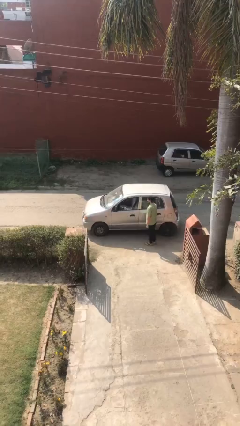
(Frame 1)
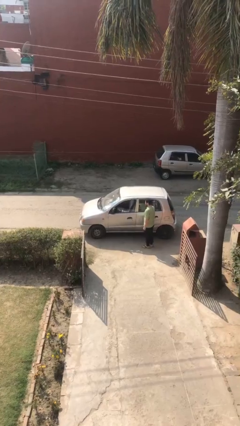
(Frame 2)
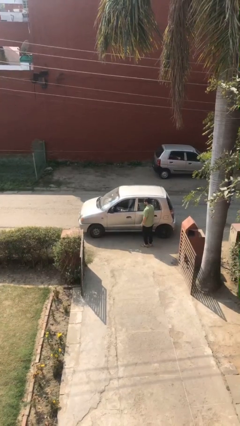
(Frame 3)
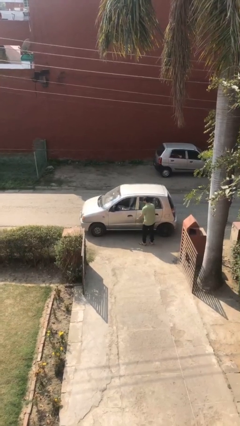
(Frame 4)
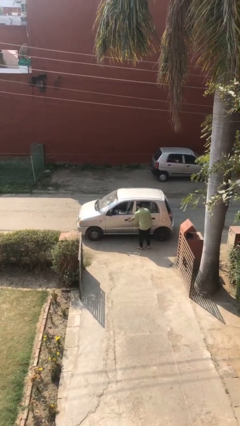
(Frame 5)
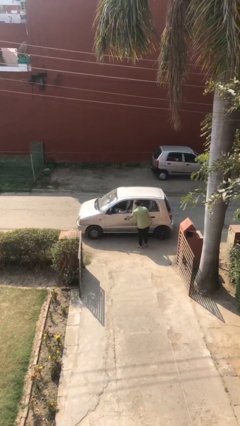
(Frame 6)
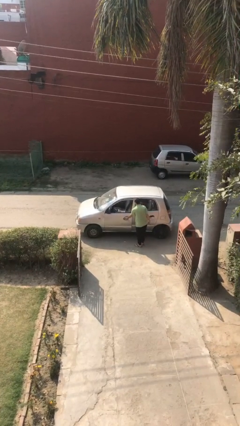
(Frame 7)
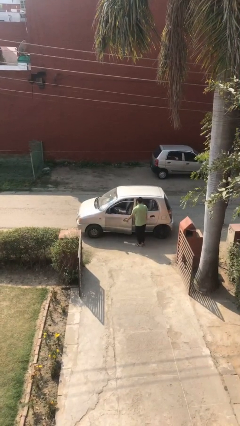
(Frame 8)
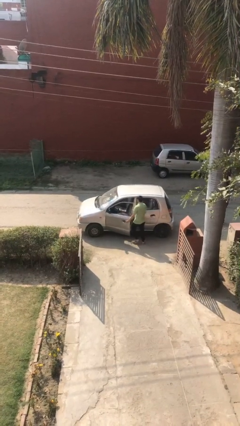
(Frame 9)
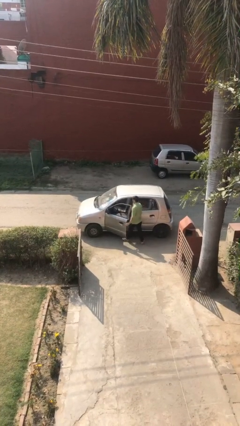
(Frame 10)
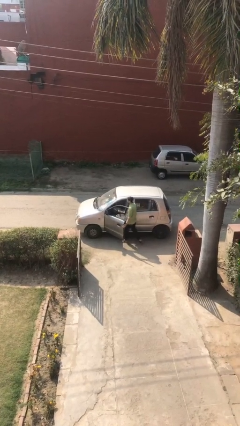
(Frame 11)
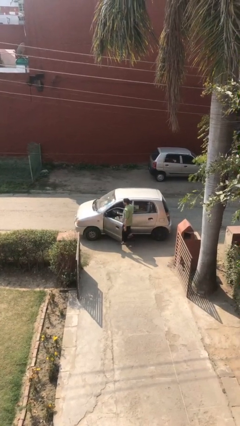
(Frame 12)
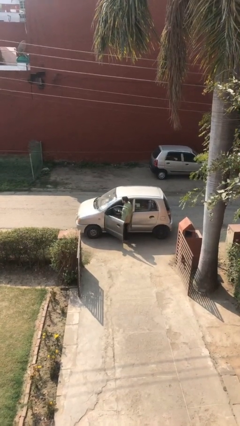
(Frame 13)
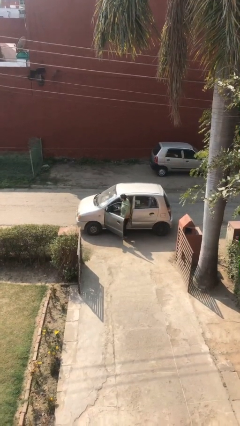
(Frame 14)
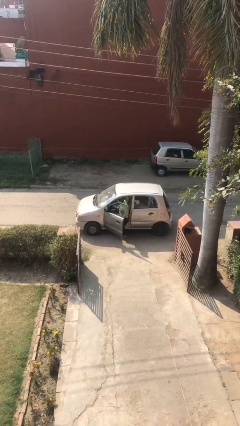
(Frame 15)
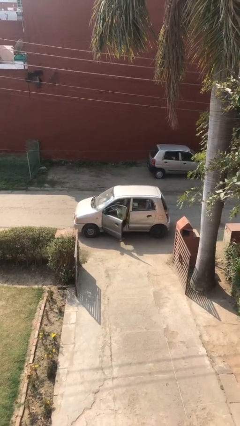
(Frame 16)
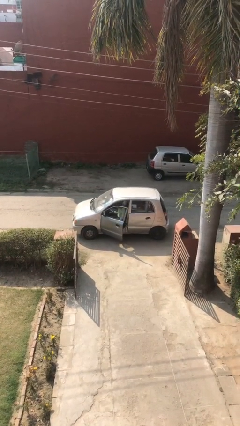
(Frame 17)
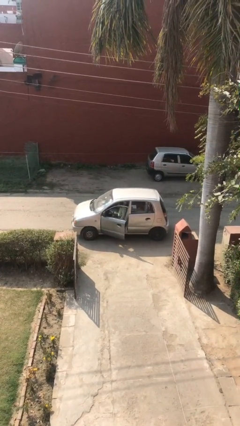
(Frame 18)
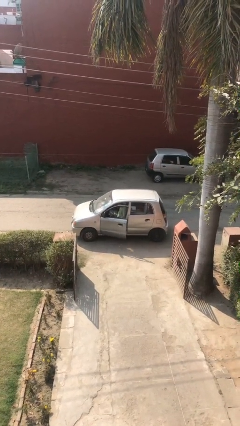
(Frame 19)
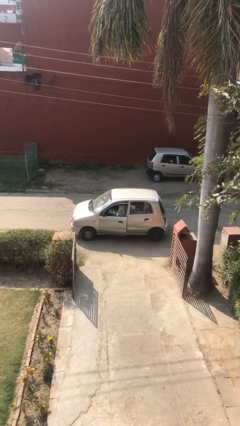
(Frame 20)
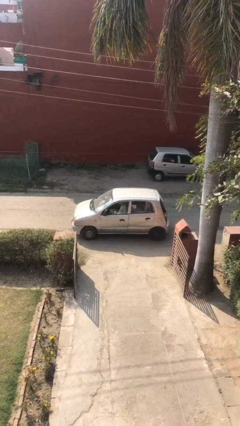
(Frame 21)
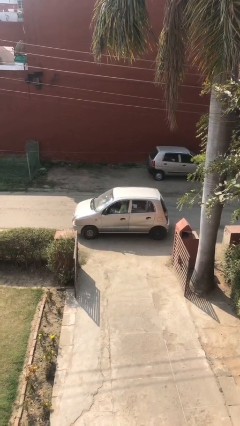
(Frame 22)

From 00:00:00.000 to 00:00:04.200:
car picks up person

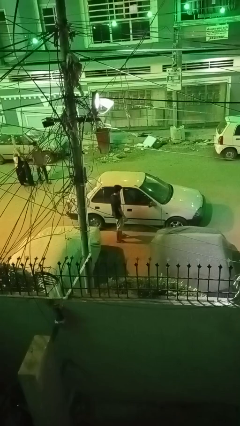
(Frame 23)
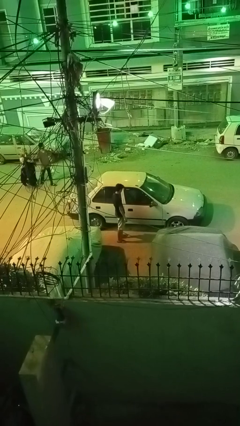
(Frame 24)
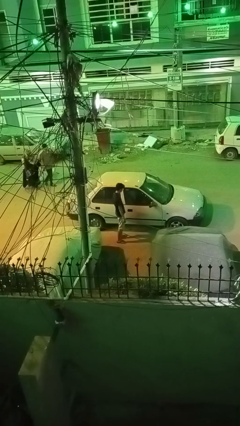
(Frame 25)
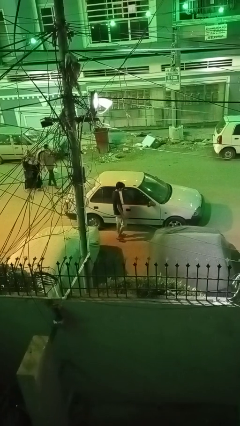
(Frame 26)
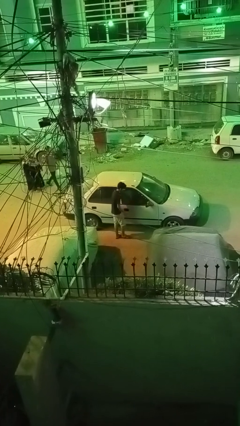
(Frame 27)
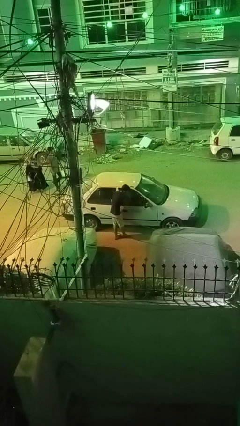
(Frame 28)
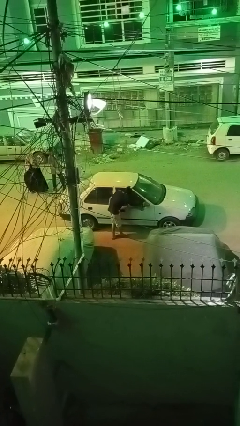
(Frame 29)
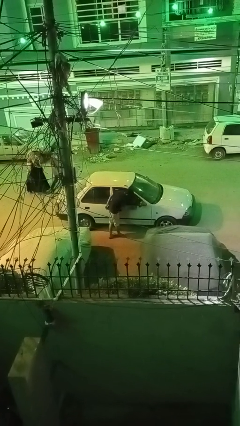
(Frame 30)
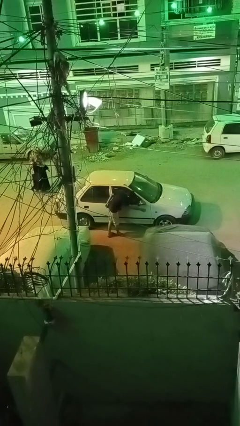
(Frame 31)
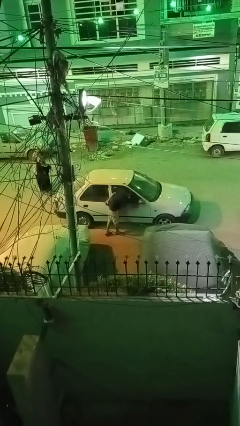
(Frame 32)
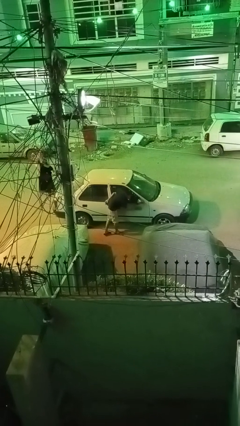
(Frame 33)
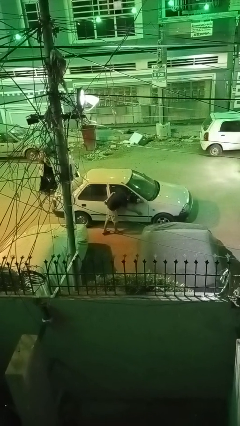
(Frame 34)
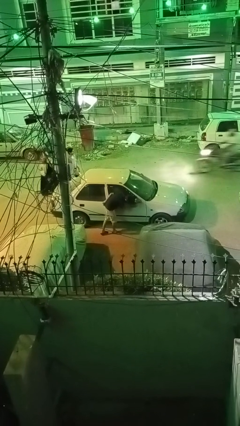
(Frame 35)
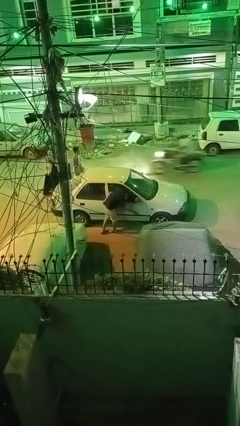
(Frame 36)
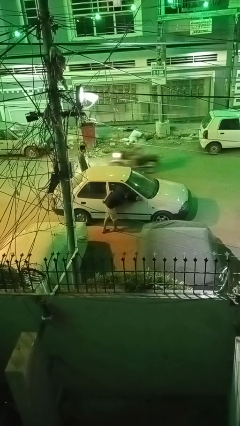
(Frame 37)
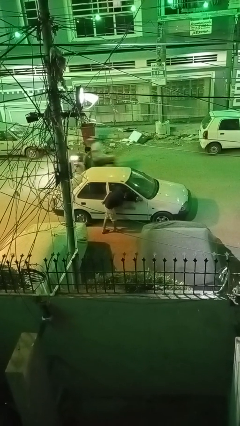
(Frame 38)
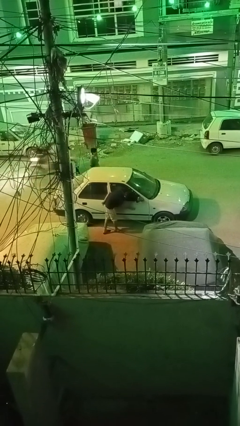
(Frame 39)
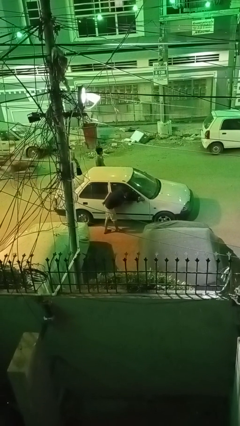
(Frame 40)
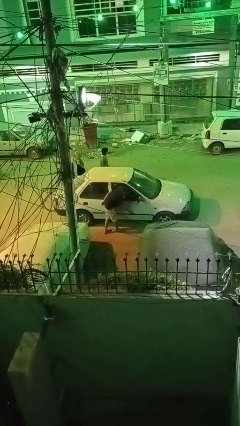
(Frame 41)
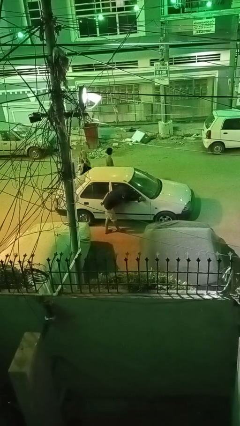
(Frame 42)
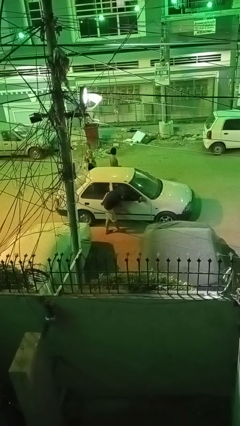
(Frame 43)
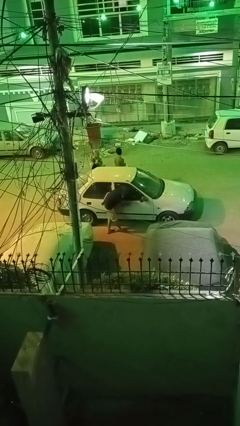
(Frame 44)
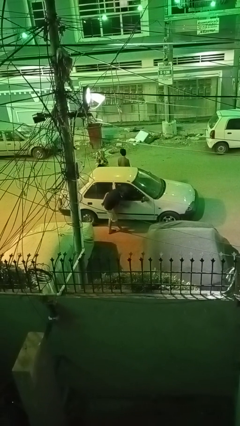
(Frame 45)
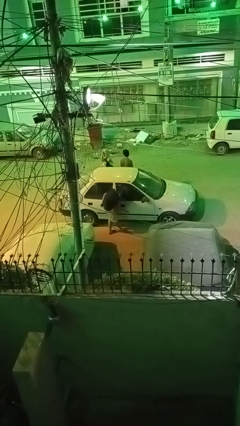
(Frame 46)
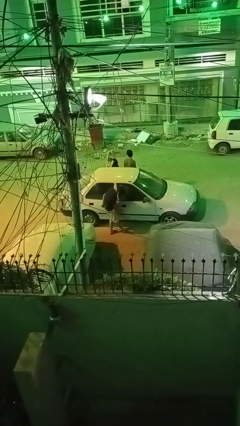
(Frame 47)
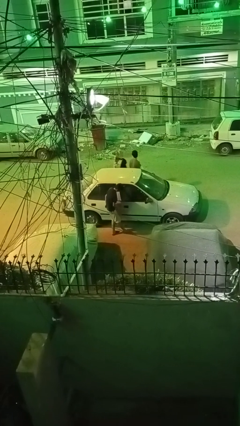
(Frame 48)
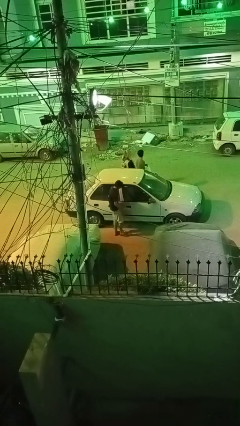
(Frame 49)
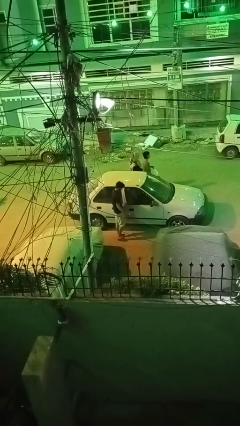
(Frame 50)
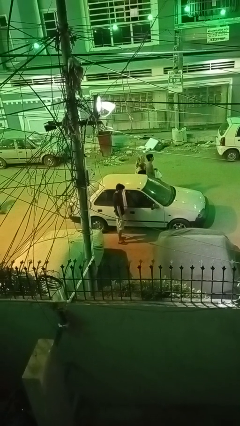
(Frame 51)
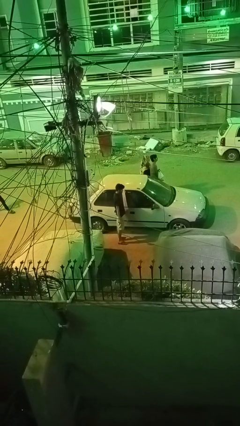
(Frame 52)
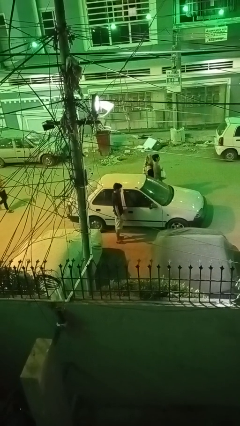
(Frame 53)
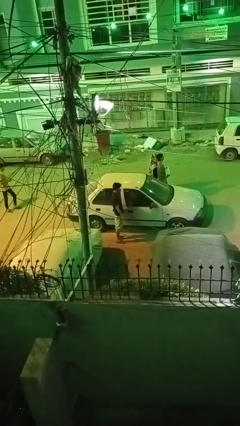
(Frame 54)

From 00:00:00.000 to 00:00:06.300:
person polishes car with rag

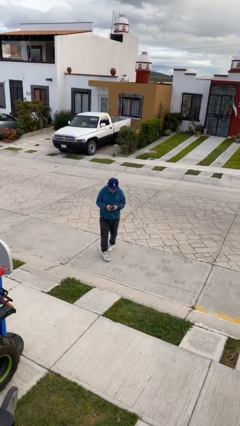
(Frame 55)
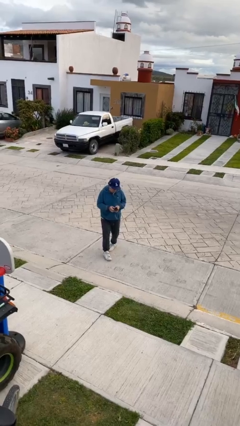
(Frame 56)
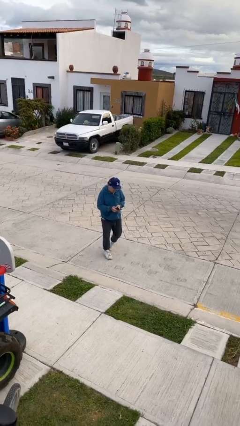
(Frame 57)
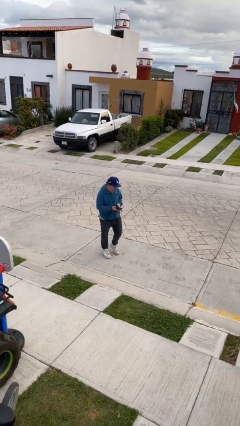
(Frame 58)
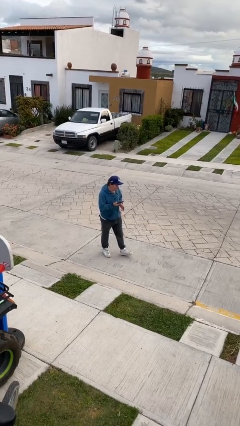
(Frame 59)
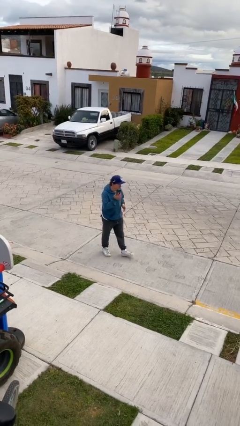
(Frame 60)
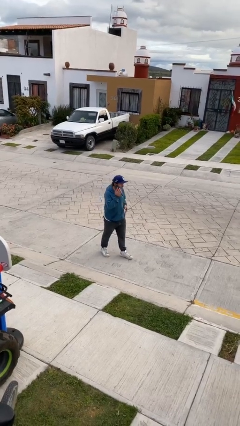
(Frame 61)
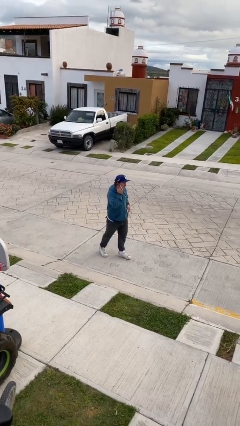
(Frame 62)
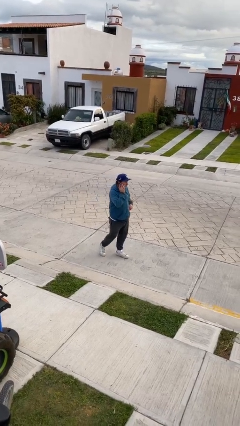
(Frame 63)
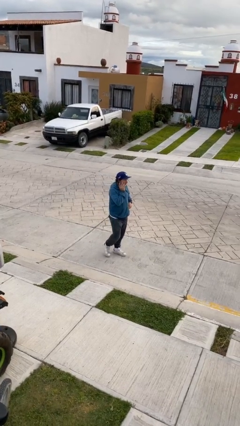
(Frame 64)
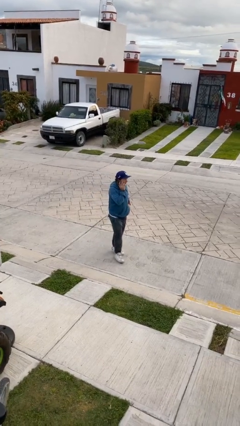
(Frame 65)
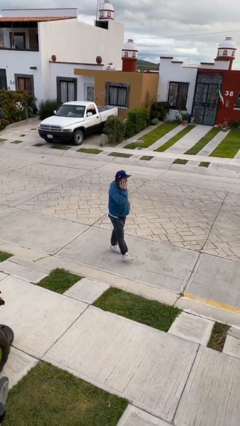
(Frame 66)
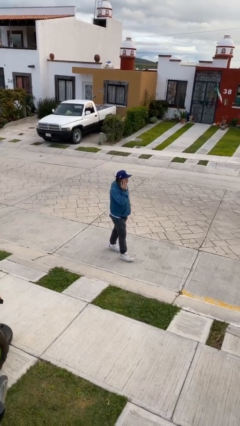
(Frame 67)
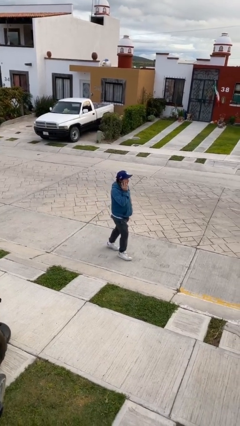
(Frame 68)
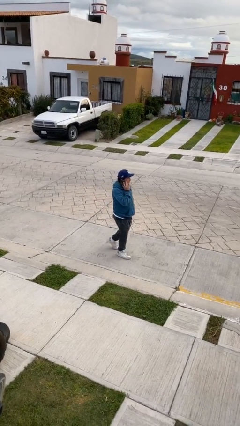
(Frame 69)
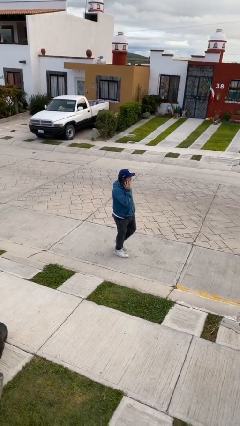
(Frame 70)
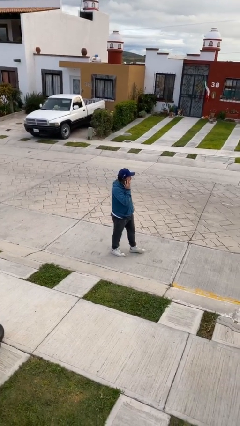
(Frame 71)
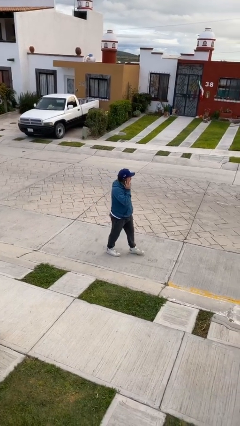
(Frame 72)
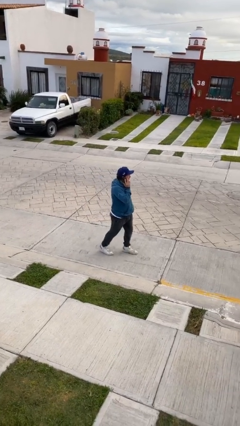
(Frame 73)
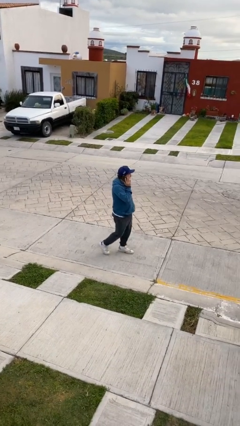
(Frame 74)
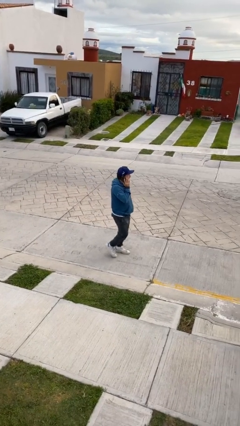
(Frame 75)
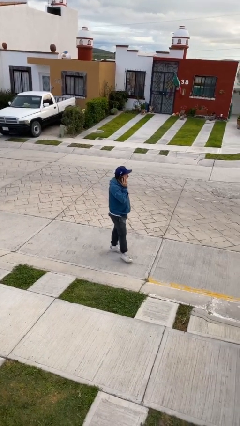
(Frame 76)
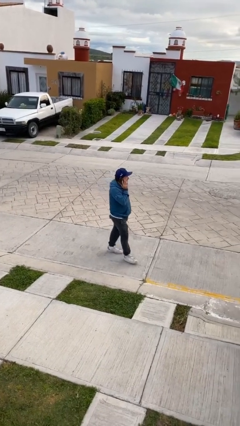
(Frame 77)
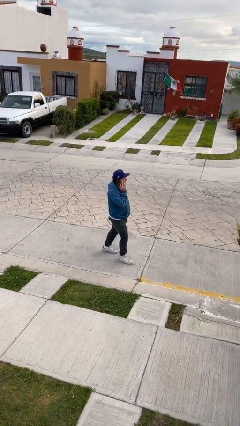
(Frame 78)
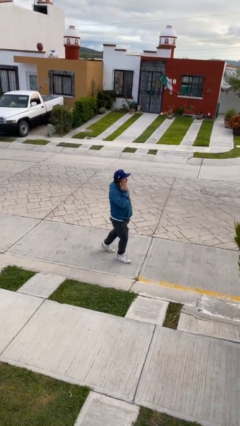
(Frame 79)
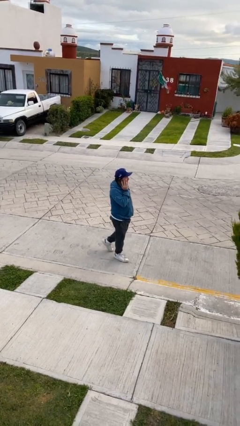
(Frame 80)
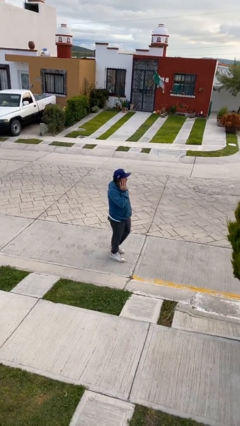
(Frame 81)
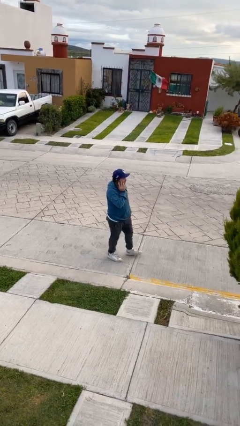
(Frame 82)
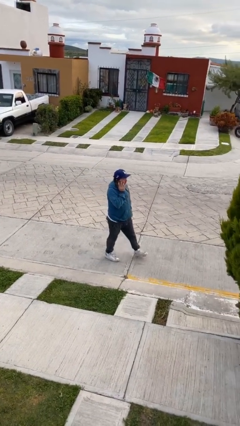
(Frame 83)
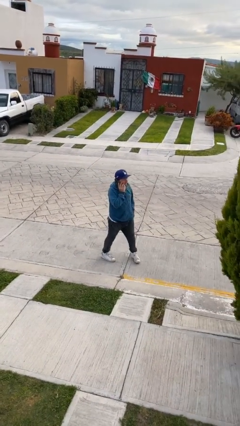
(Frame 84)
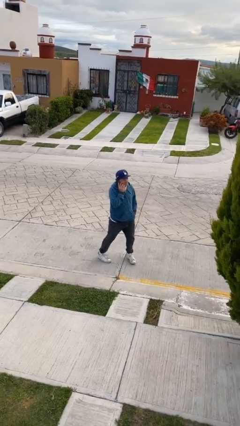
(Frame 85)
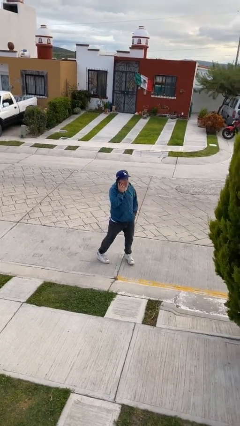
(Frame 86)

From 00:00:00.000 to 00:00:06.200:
person talks on phone

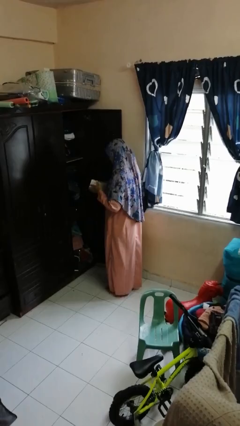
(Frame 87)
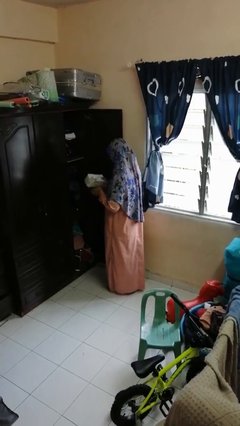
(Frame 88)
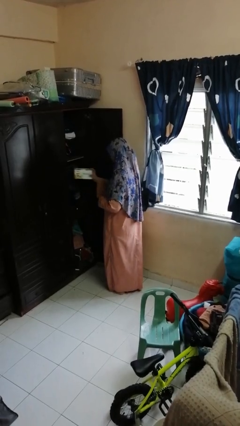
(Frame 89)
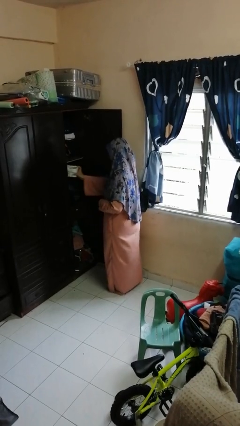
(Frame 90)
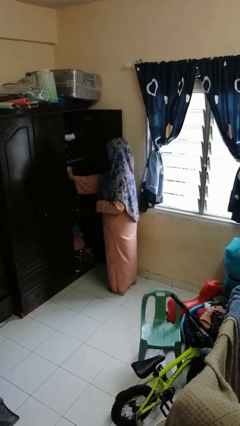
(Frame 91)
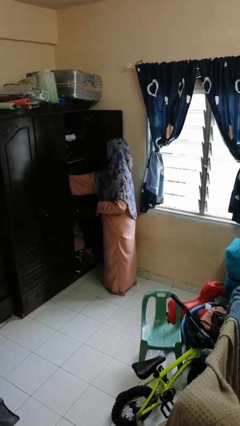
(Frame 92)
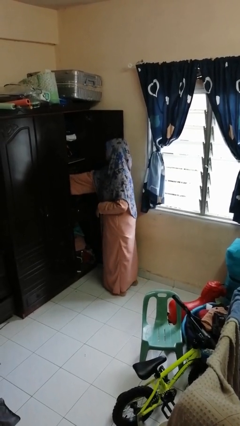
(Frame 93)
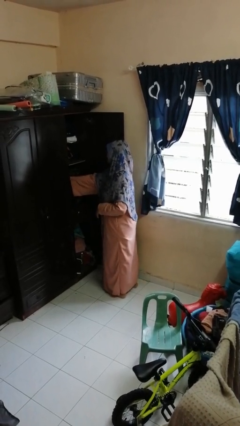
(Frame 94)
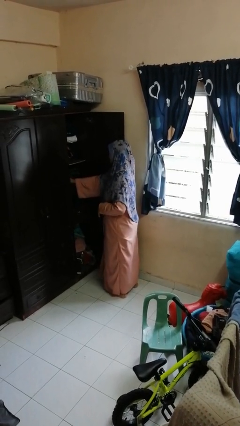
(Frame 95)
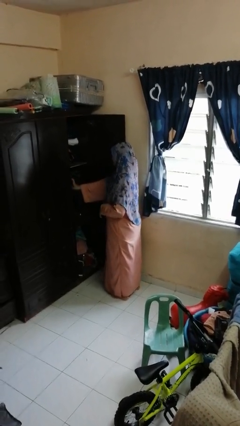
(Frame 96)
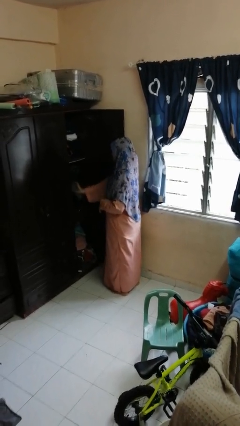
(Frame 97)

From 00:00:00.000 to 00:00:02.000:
person puts down object into cabinet
